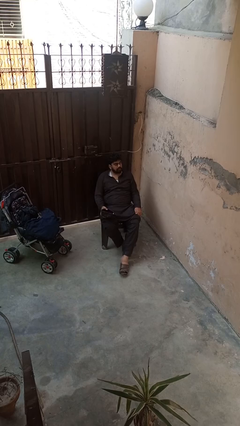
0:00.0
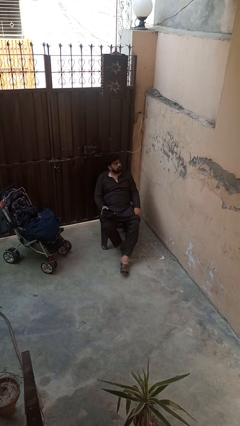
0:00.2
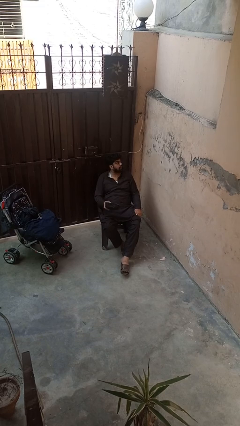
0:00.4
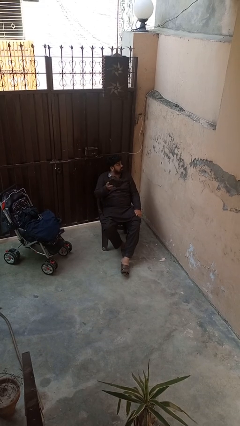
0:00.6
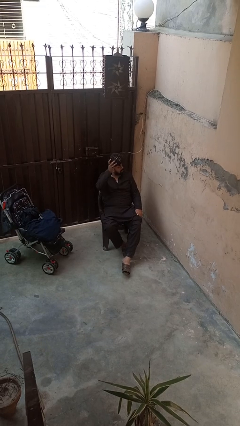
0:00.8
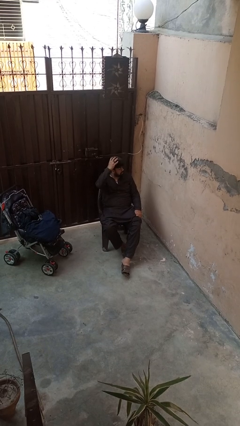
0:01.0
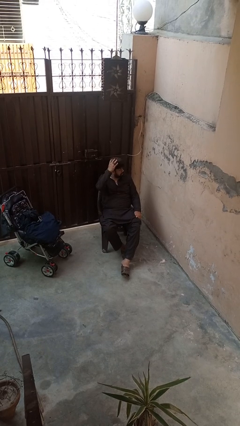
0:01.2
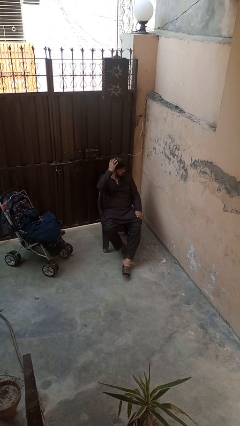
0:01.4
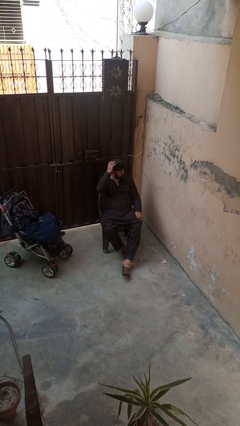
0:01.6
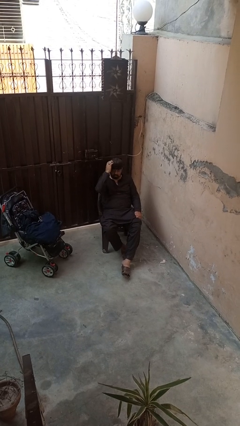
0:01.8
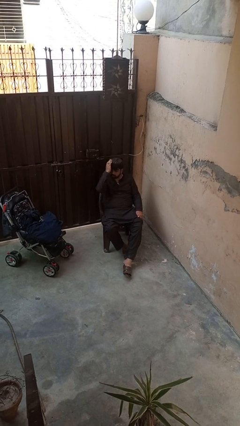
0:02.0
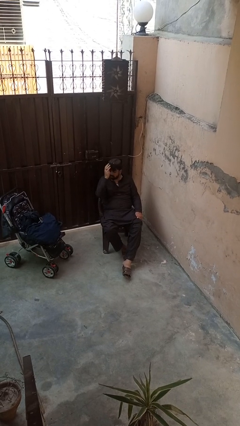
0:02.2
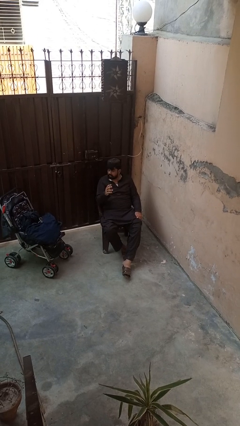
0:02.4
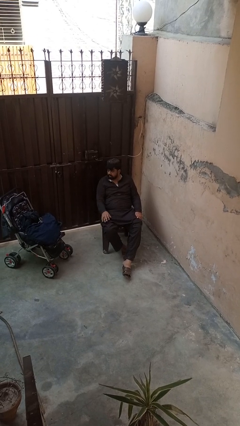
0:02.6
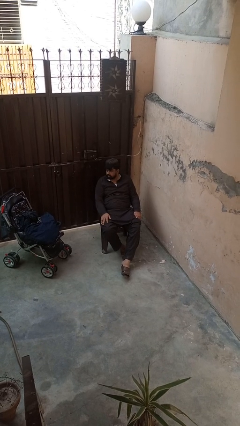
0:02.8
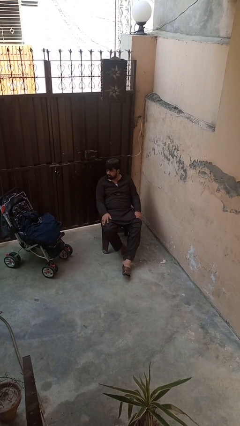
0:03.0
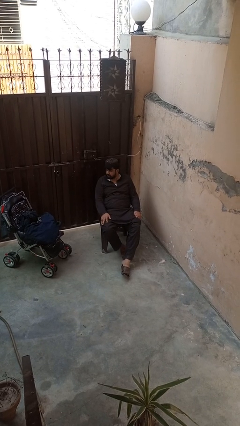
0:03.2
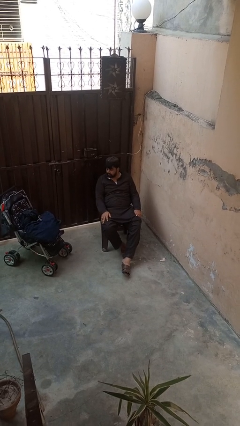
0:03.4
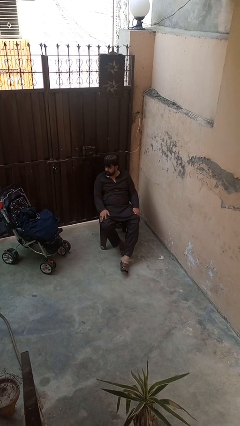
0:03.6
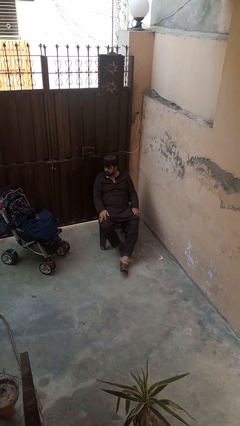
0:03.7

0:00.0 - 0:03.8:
person puts on hat

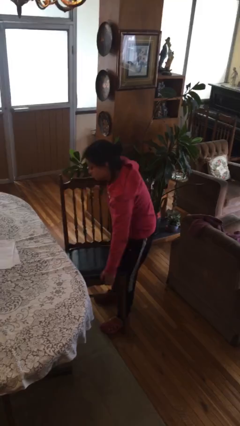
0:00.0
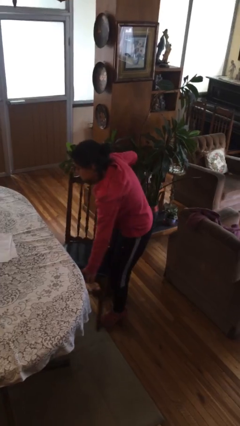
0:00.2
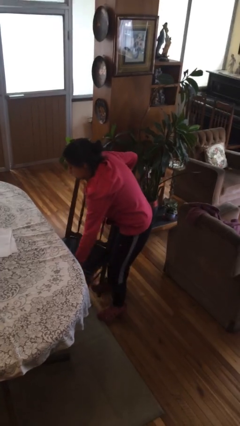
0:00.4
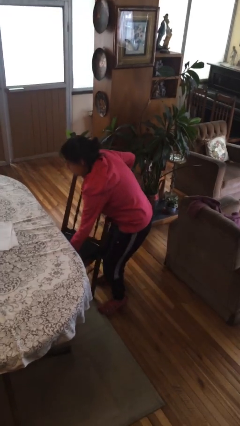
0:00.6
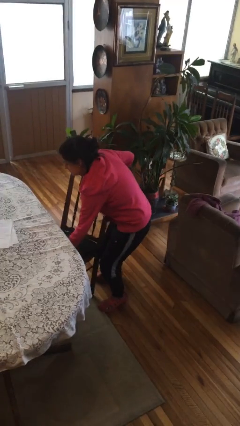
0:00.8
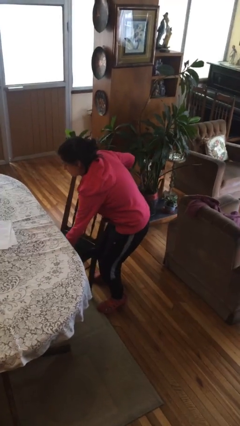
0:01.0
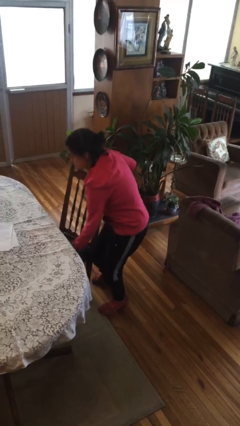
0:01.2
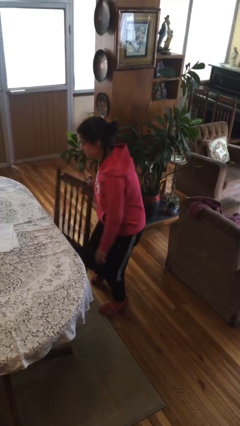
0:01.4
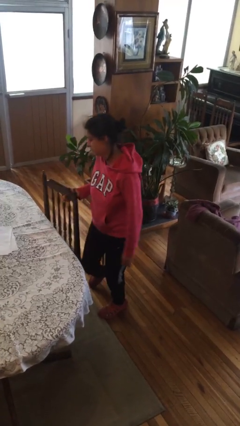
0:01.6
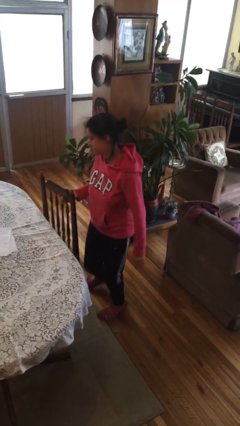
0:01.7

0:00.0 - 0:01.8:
person puts down object on floor

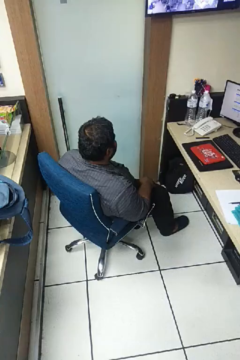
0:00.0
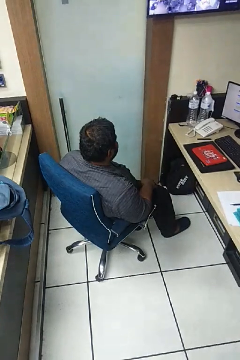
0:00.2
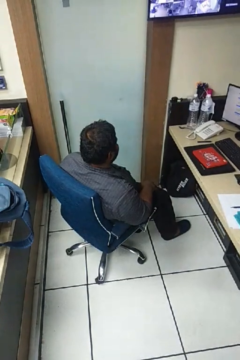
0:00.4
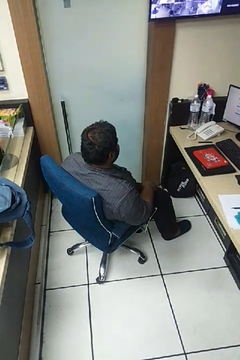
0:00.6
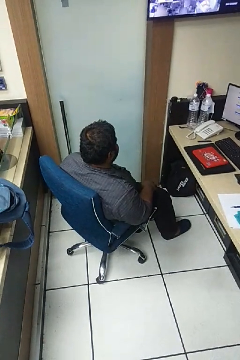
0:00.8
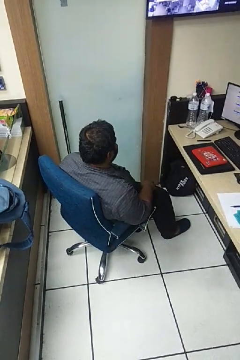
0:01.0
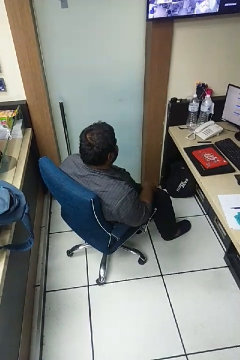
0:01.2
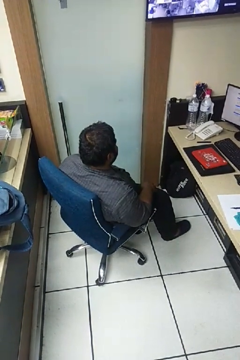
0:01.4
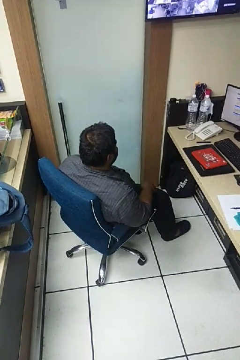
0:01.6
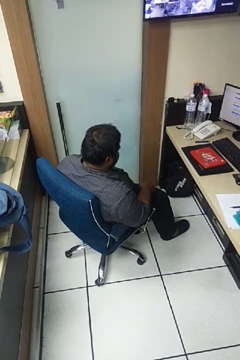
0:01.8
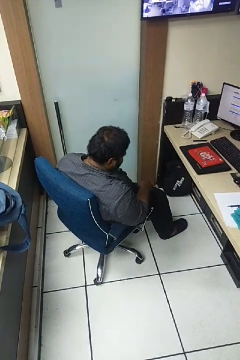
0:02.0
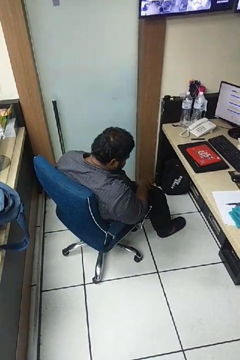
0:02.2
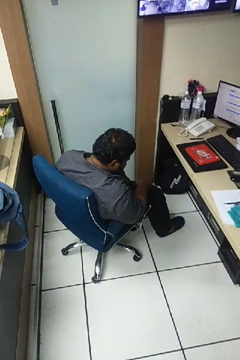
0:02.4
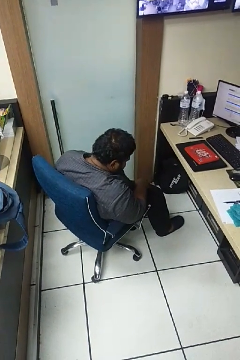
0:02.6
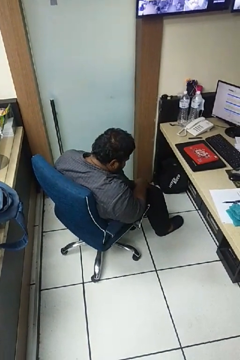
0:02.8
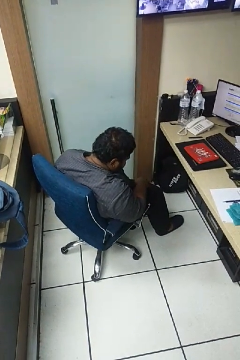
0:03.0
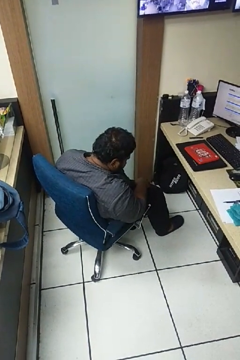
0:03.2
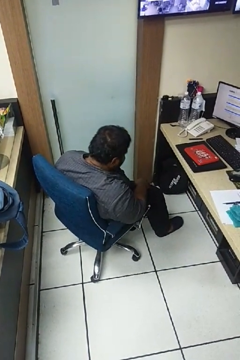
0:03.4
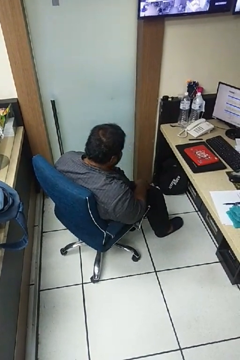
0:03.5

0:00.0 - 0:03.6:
person looks at hands in lap

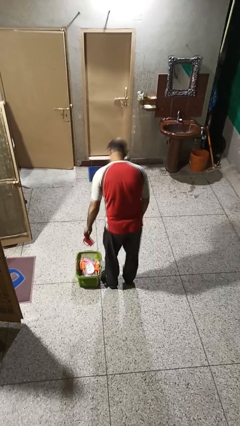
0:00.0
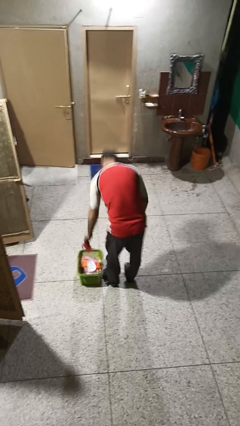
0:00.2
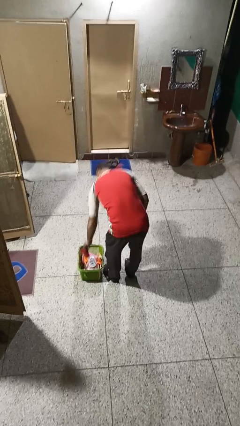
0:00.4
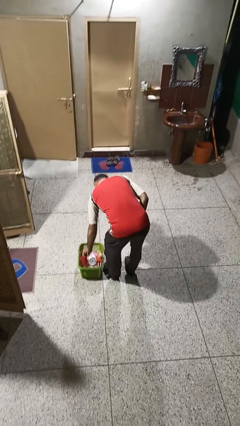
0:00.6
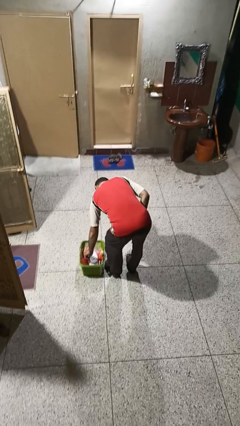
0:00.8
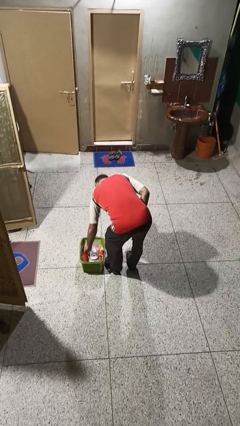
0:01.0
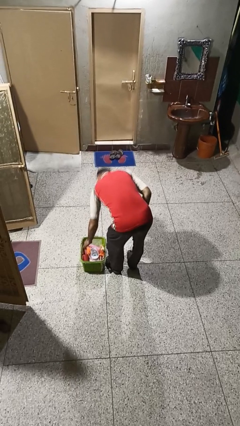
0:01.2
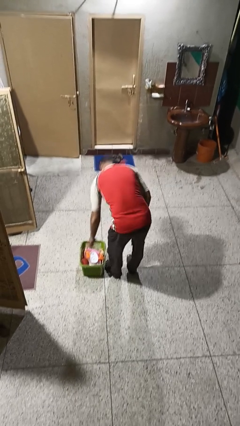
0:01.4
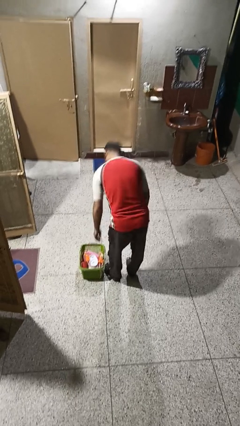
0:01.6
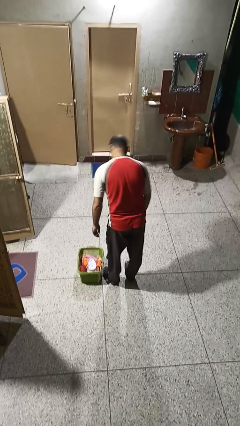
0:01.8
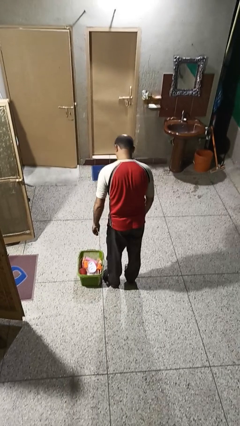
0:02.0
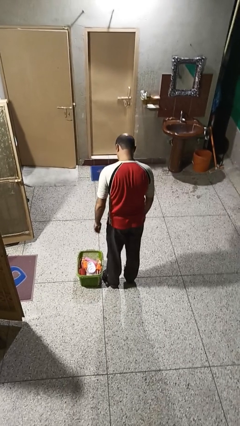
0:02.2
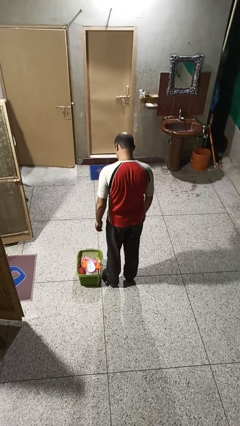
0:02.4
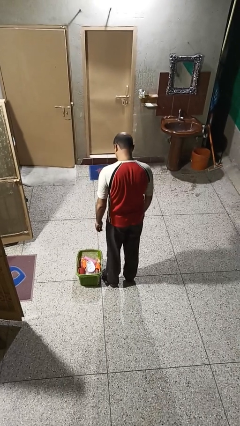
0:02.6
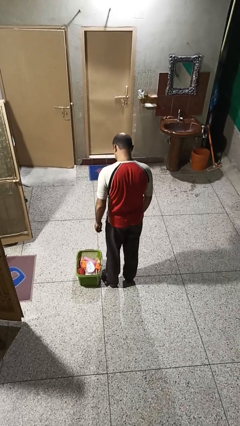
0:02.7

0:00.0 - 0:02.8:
person puts object into basket

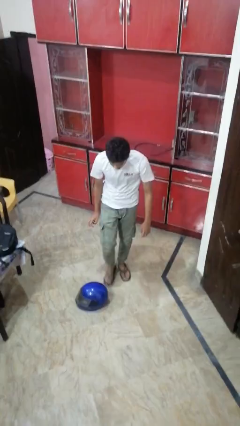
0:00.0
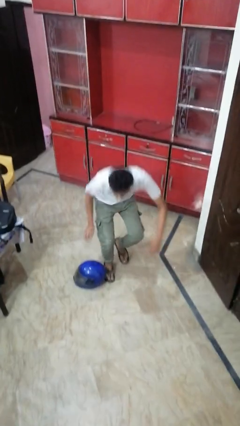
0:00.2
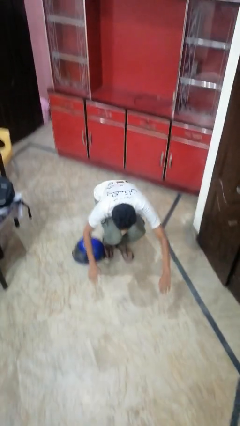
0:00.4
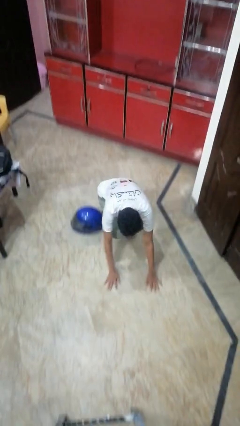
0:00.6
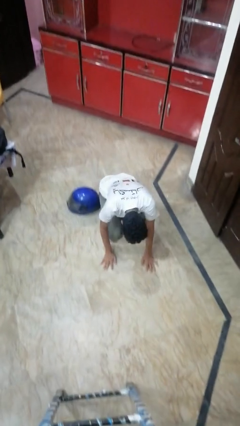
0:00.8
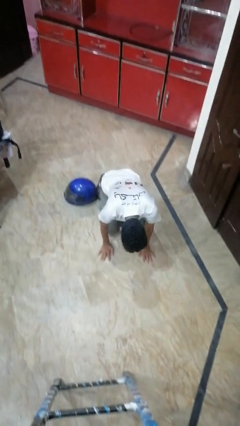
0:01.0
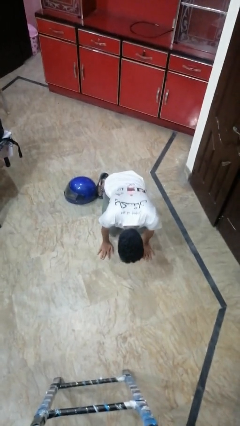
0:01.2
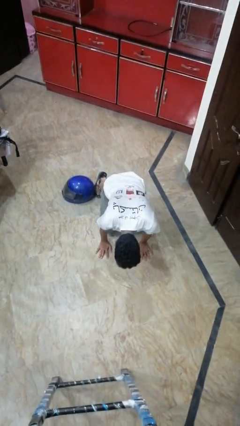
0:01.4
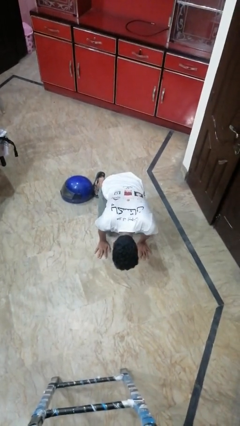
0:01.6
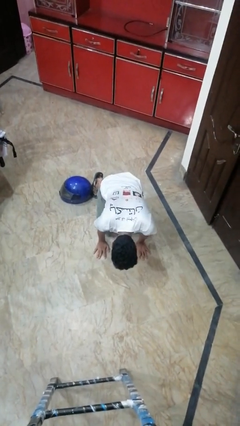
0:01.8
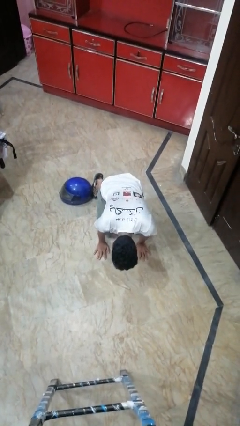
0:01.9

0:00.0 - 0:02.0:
person trips on object on floor

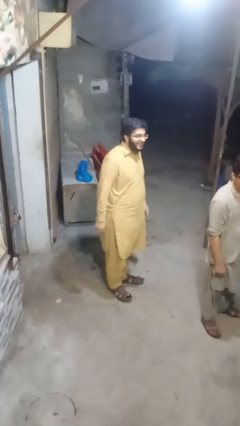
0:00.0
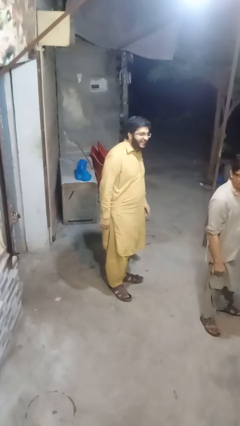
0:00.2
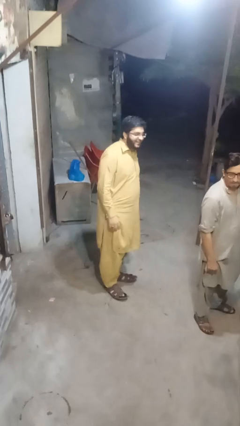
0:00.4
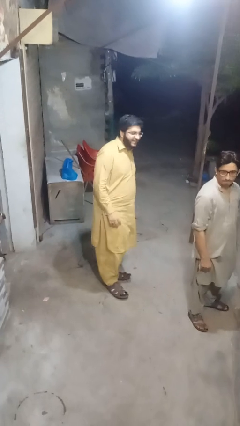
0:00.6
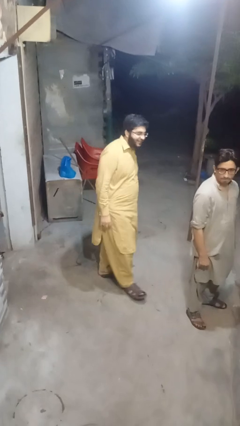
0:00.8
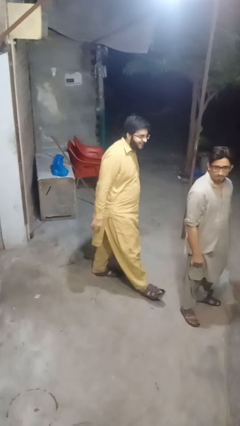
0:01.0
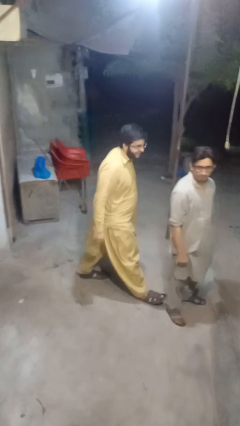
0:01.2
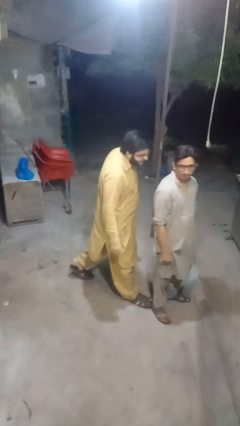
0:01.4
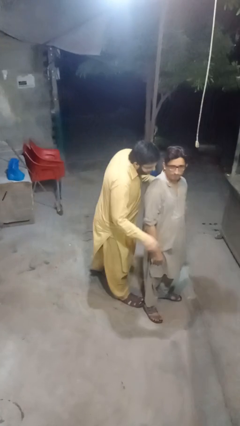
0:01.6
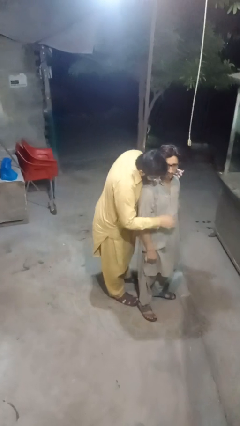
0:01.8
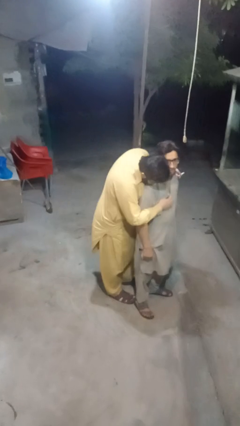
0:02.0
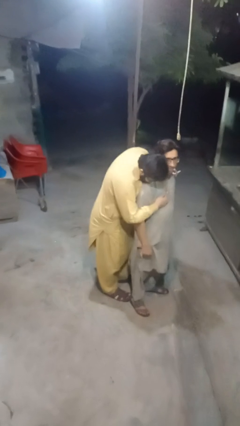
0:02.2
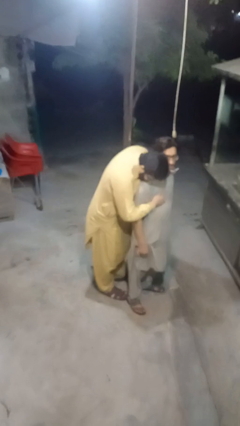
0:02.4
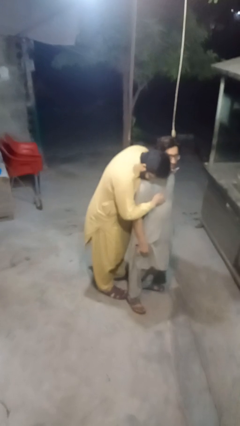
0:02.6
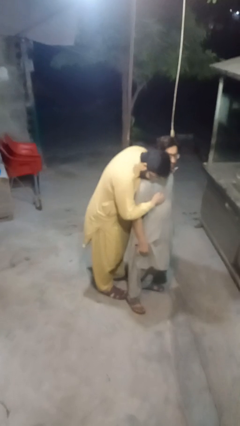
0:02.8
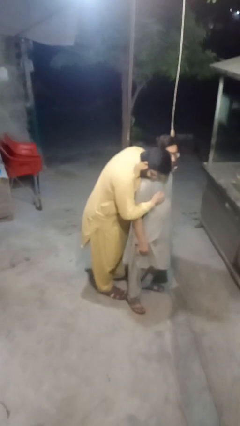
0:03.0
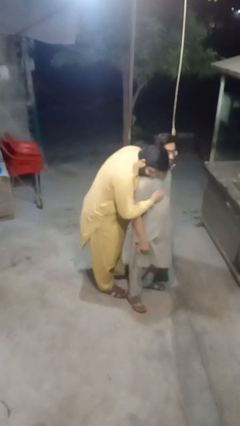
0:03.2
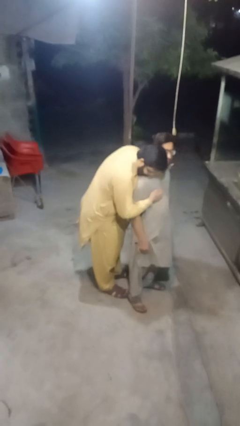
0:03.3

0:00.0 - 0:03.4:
person hugs person from behind

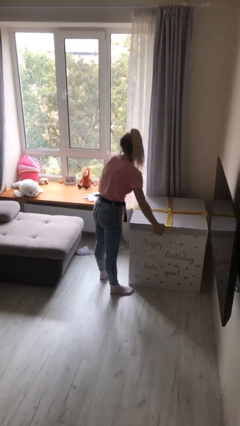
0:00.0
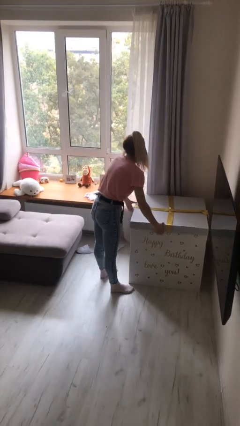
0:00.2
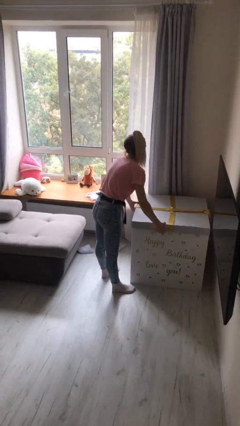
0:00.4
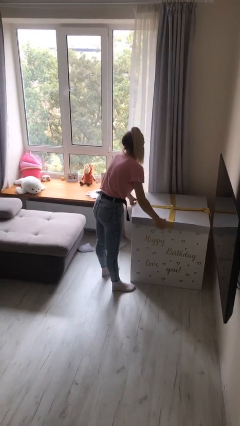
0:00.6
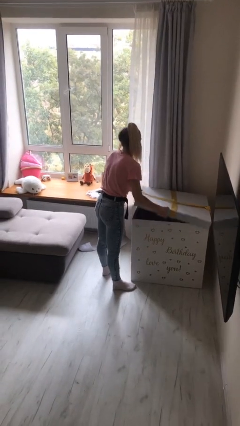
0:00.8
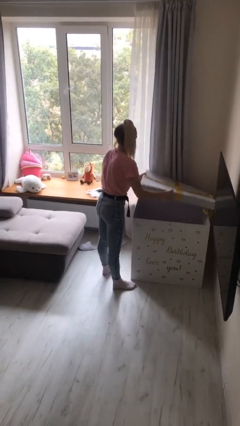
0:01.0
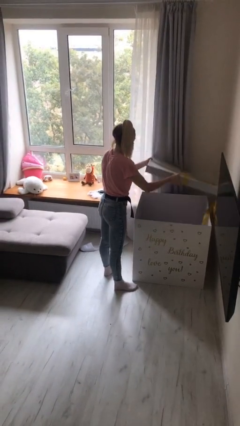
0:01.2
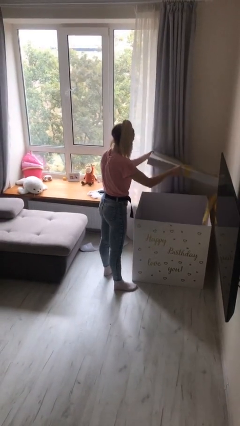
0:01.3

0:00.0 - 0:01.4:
person opens box
